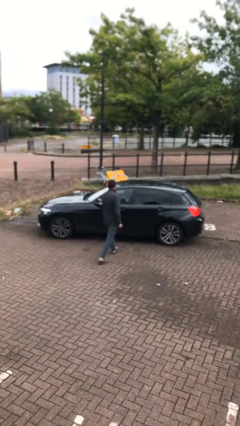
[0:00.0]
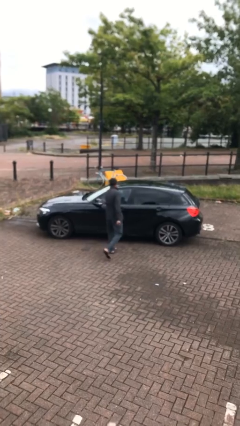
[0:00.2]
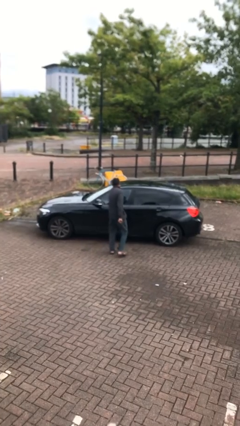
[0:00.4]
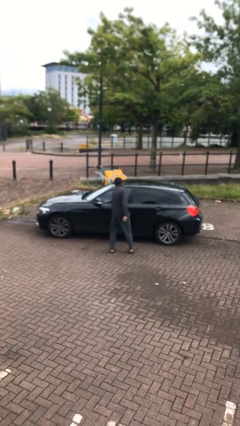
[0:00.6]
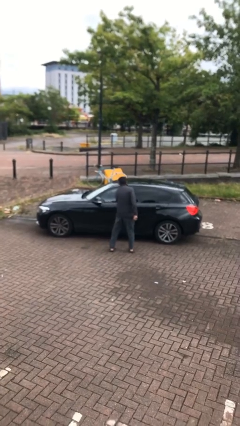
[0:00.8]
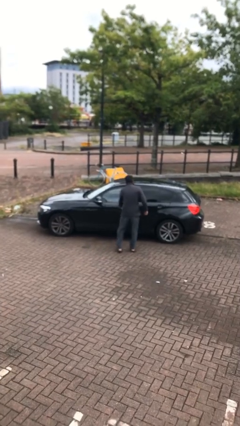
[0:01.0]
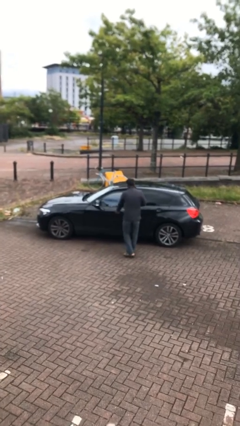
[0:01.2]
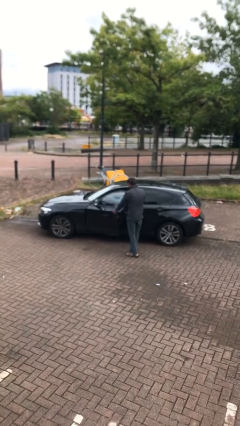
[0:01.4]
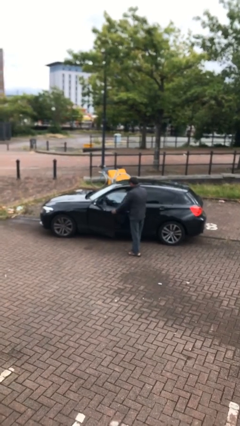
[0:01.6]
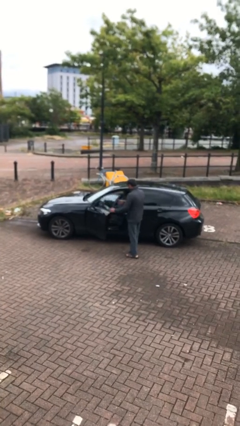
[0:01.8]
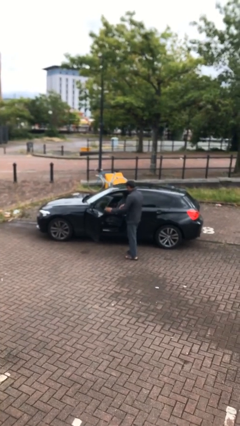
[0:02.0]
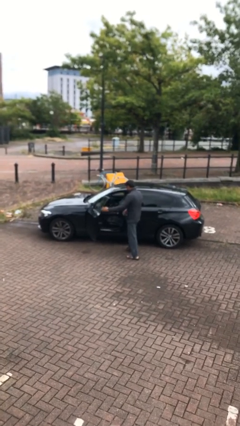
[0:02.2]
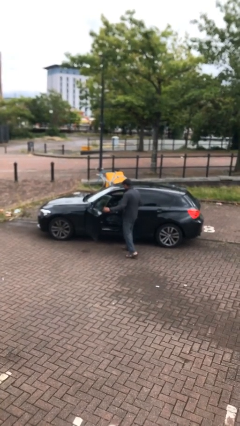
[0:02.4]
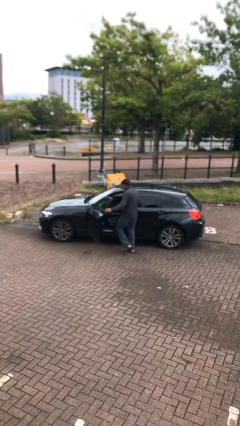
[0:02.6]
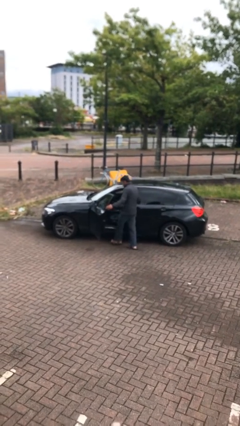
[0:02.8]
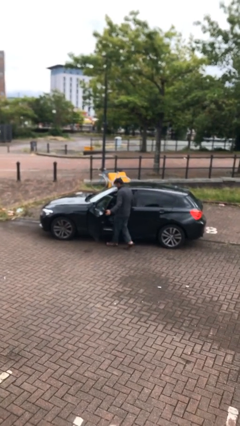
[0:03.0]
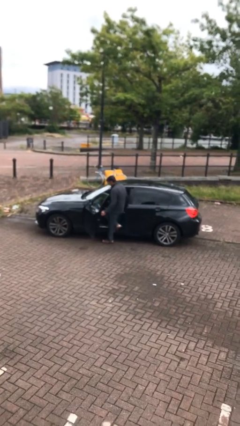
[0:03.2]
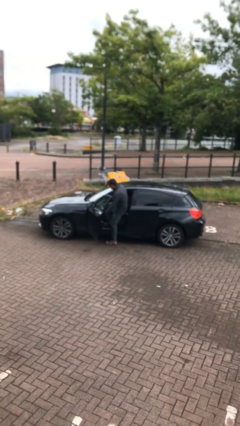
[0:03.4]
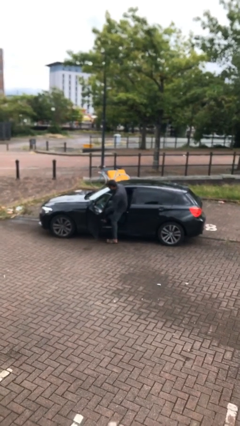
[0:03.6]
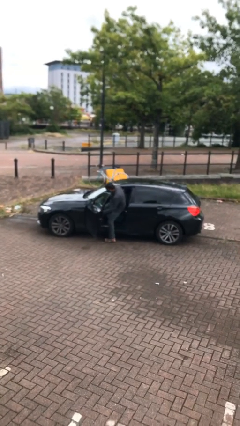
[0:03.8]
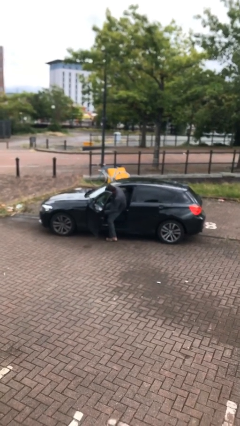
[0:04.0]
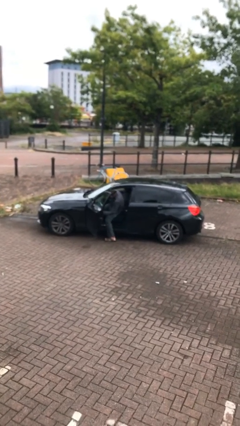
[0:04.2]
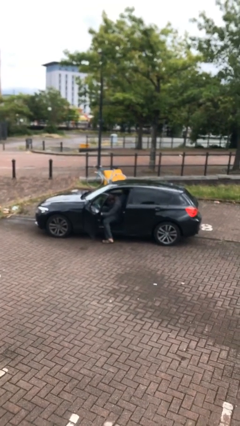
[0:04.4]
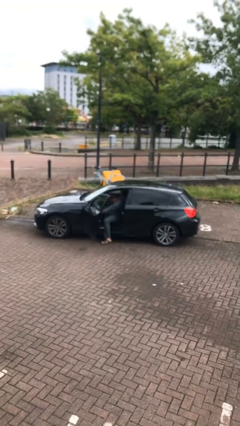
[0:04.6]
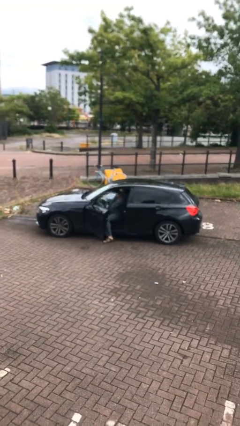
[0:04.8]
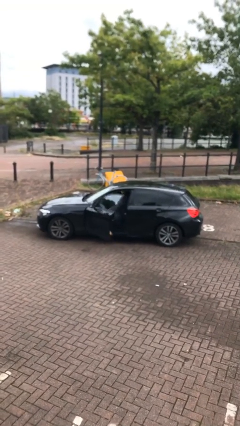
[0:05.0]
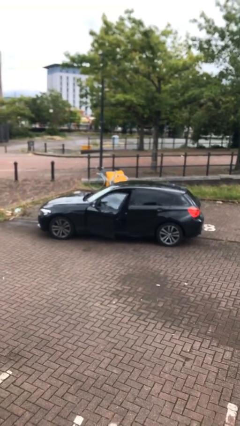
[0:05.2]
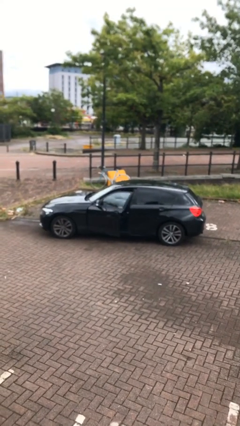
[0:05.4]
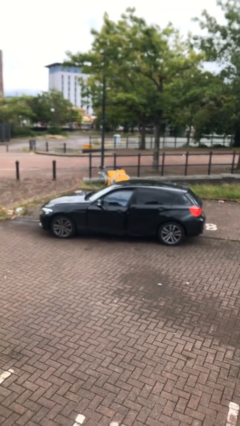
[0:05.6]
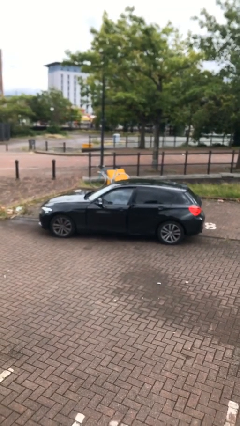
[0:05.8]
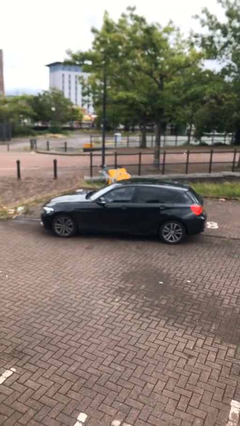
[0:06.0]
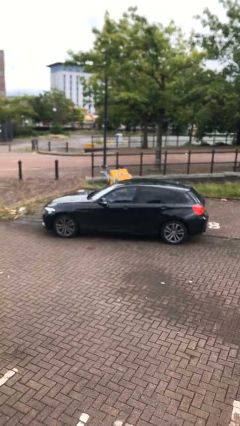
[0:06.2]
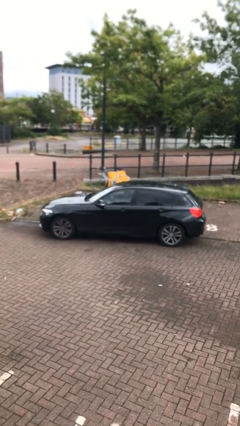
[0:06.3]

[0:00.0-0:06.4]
car picks up person

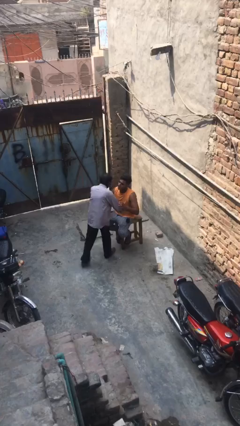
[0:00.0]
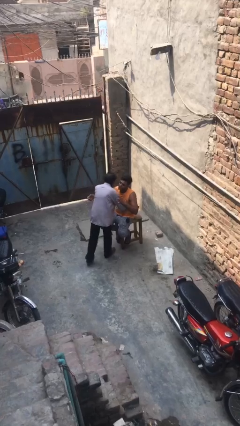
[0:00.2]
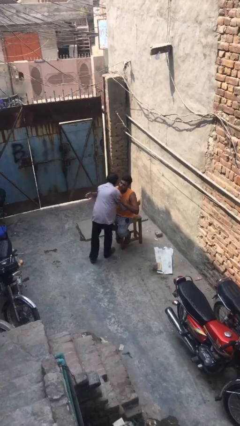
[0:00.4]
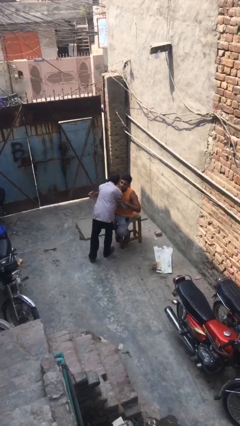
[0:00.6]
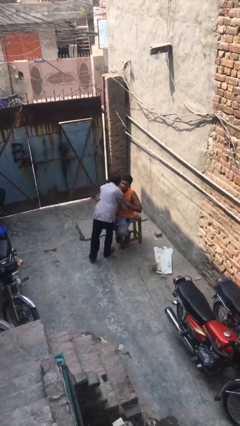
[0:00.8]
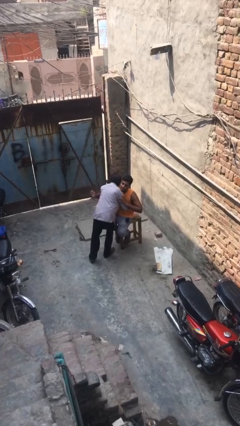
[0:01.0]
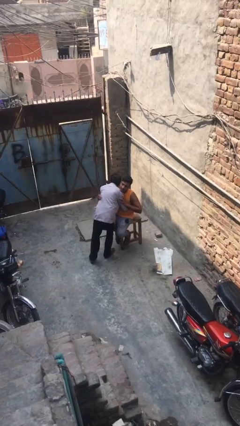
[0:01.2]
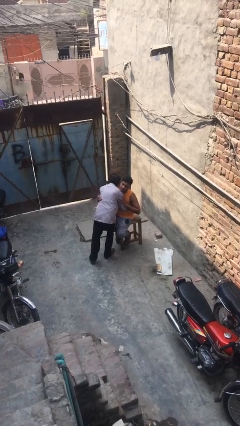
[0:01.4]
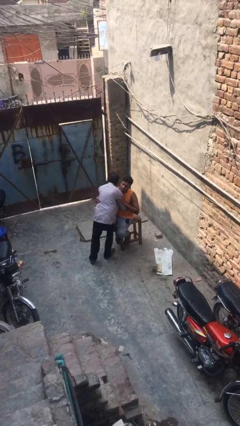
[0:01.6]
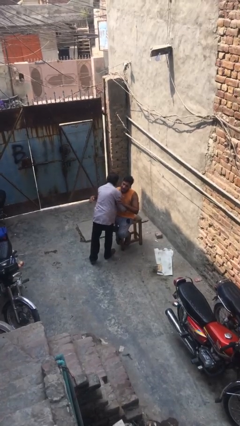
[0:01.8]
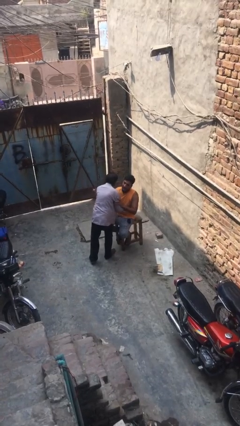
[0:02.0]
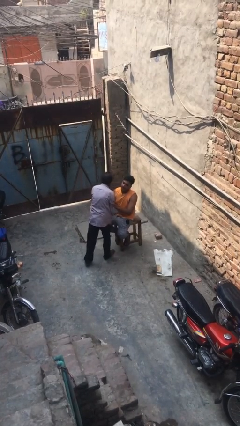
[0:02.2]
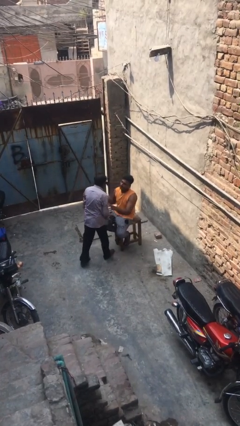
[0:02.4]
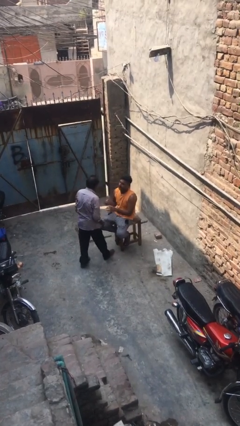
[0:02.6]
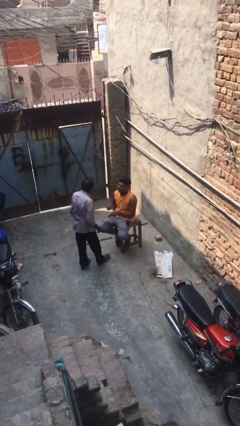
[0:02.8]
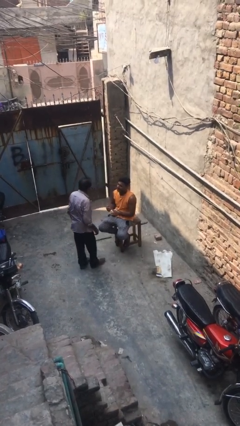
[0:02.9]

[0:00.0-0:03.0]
person embraces person

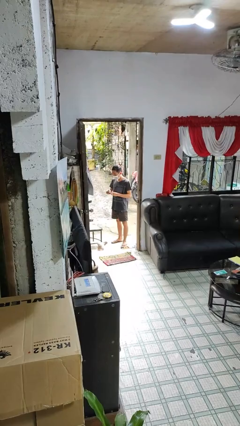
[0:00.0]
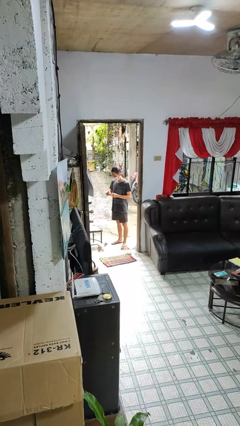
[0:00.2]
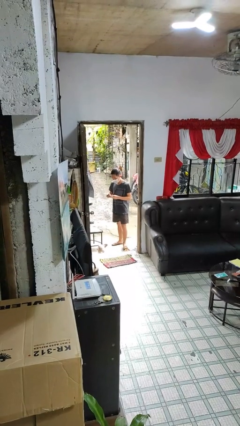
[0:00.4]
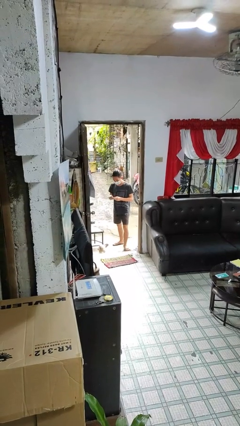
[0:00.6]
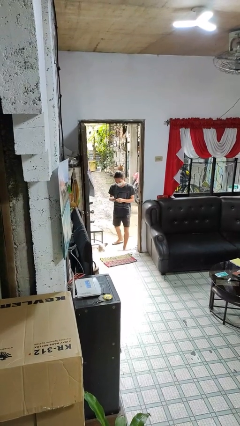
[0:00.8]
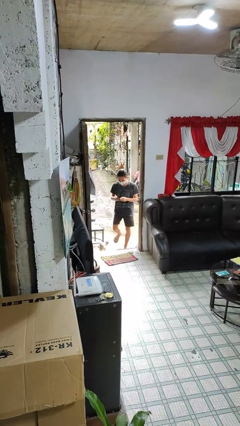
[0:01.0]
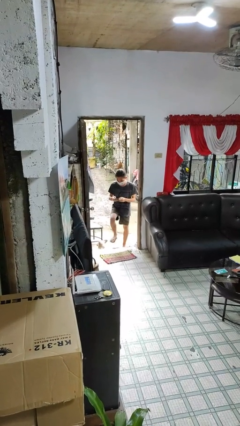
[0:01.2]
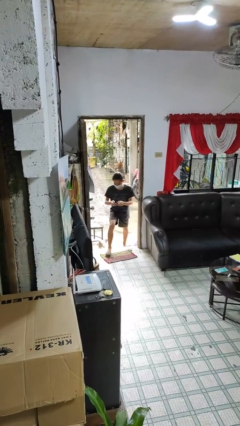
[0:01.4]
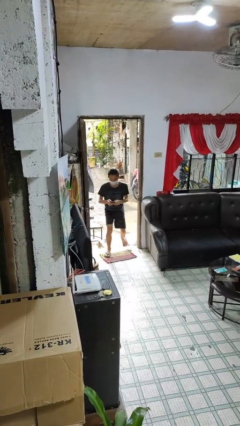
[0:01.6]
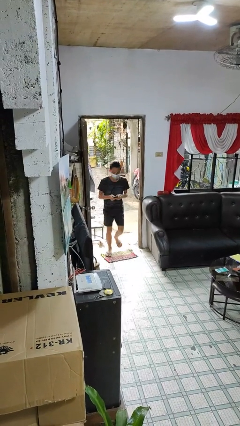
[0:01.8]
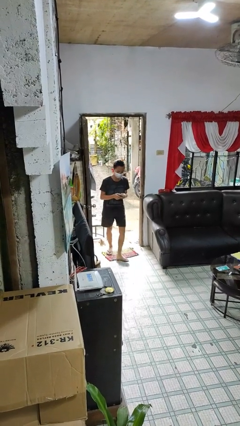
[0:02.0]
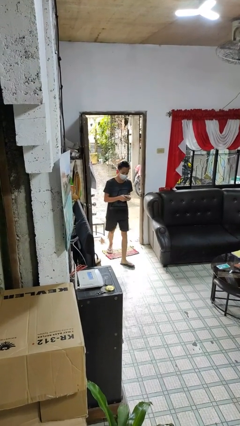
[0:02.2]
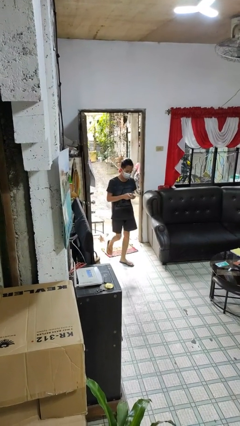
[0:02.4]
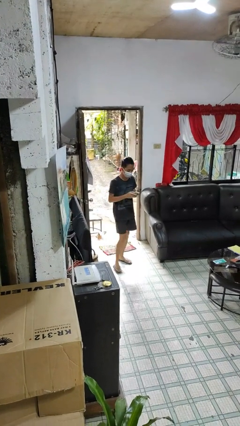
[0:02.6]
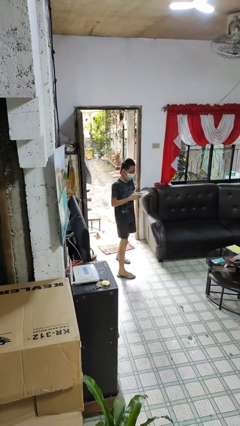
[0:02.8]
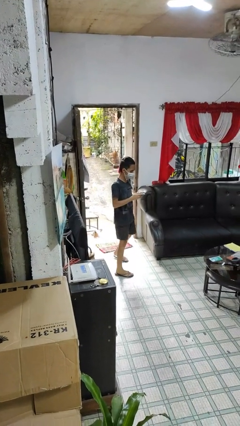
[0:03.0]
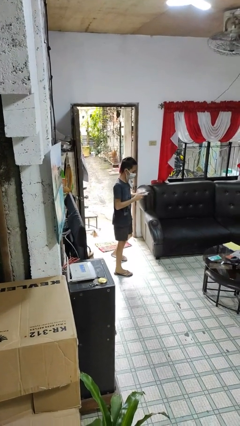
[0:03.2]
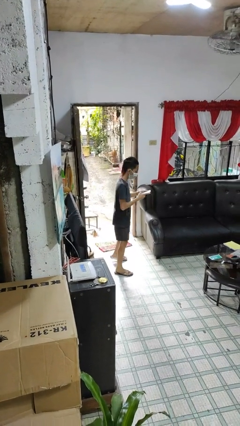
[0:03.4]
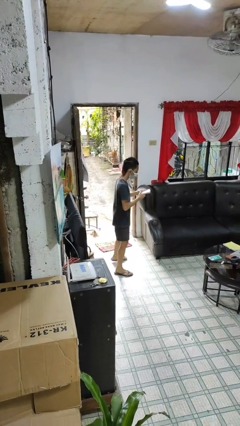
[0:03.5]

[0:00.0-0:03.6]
person enters scene through structure

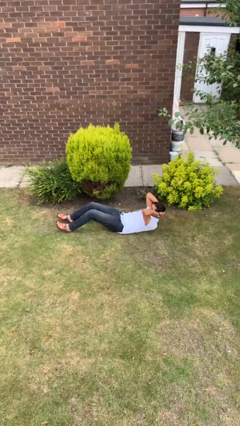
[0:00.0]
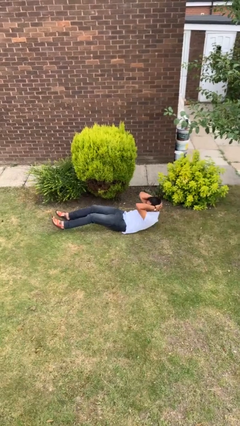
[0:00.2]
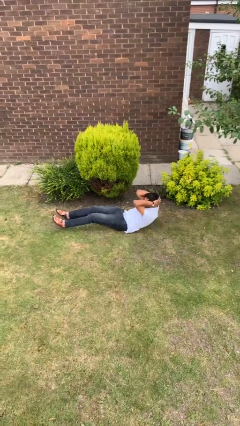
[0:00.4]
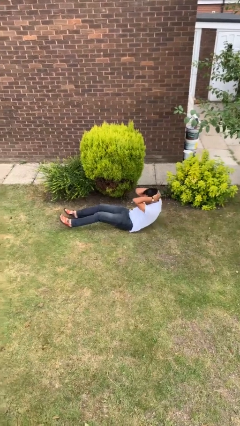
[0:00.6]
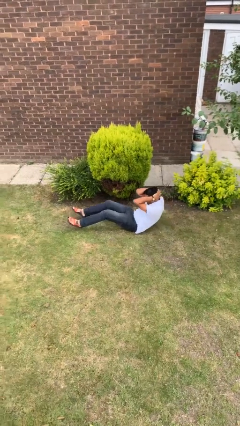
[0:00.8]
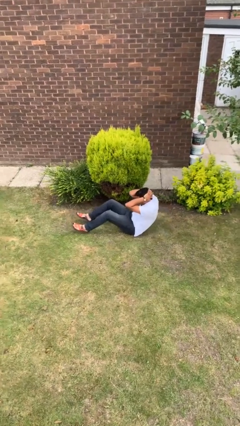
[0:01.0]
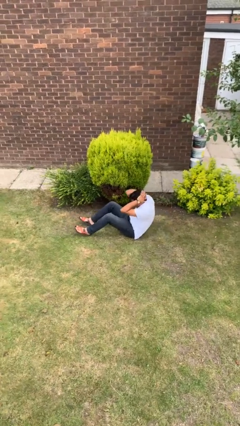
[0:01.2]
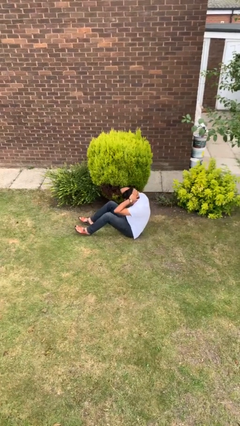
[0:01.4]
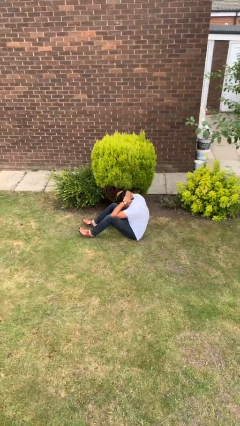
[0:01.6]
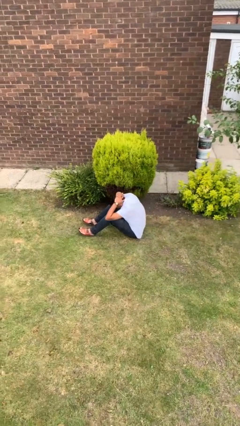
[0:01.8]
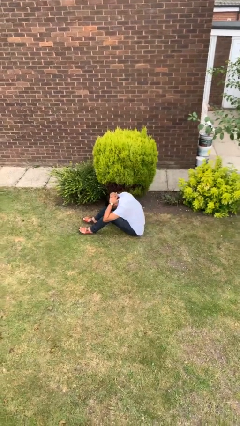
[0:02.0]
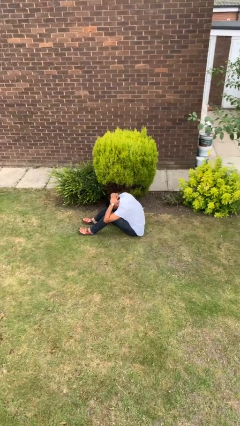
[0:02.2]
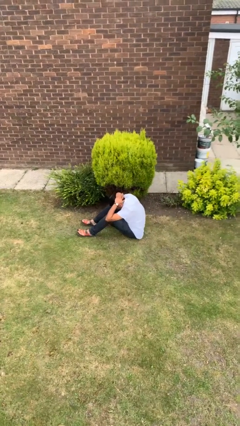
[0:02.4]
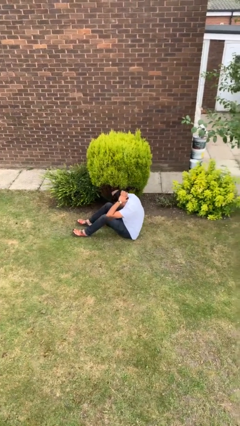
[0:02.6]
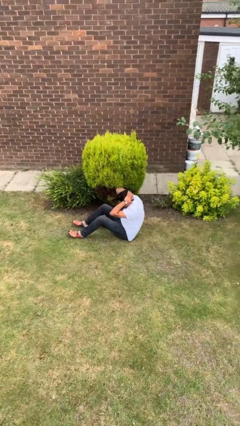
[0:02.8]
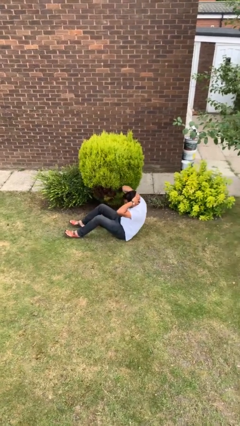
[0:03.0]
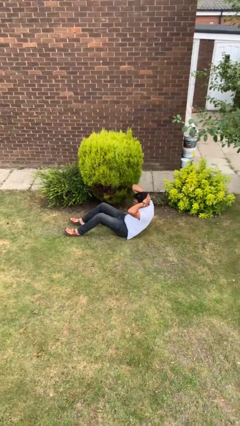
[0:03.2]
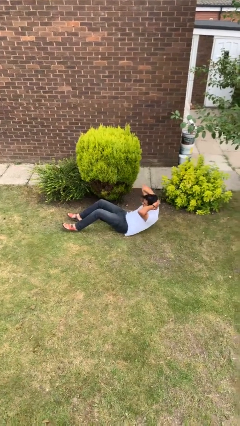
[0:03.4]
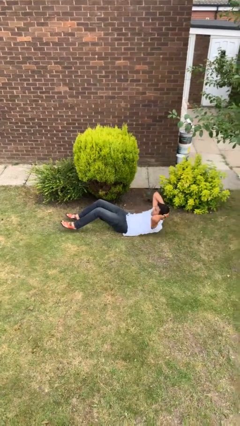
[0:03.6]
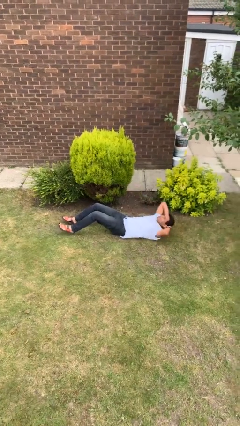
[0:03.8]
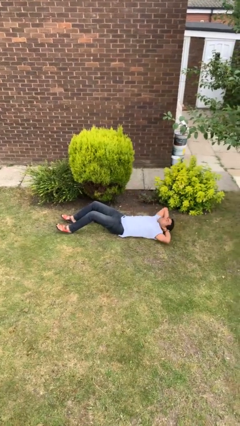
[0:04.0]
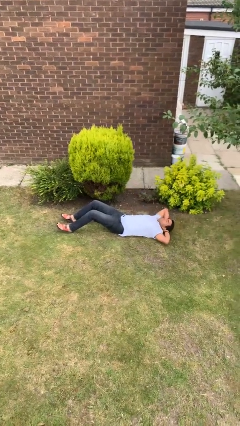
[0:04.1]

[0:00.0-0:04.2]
person exercises with situp

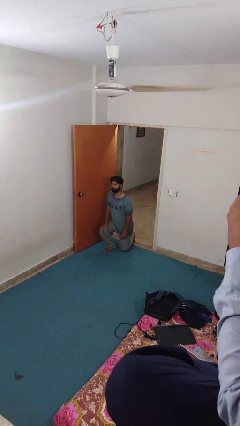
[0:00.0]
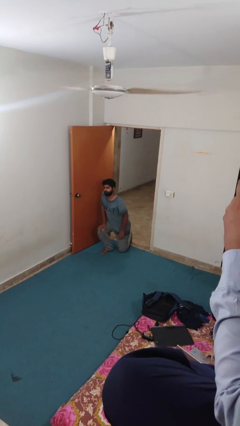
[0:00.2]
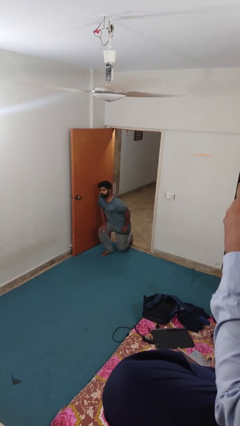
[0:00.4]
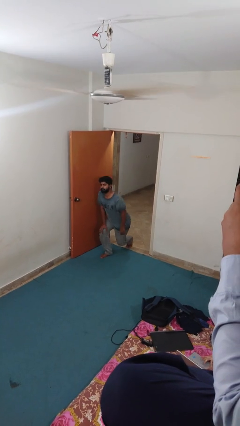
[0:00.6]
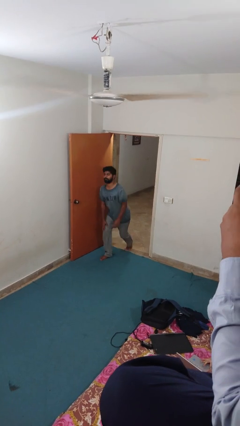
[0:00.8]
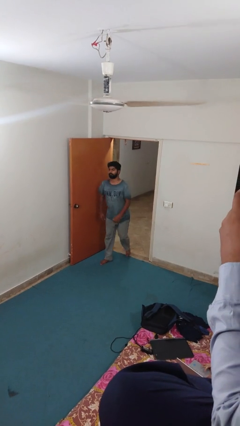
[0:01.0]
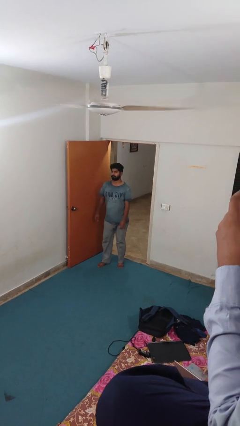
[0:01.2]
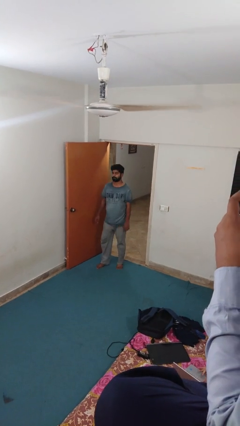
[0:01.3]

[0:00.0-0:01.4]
person stands up from floor
